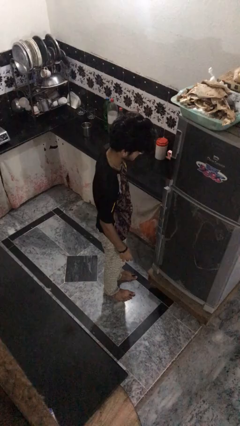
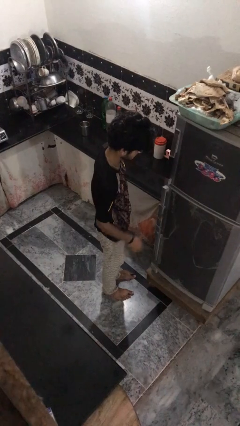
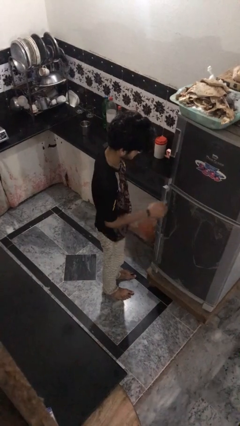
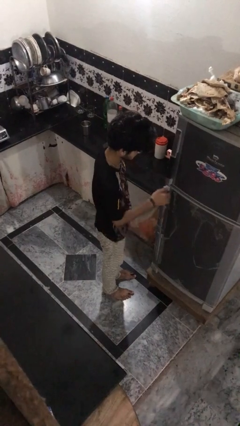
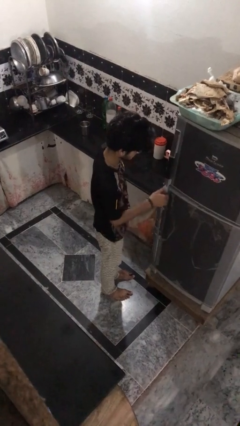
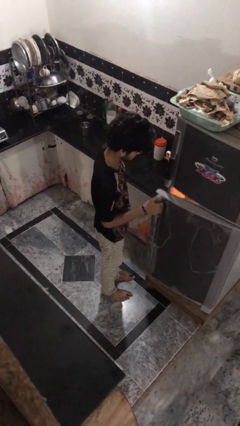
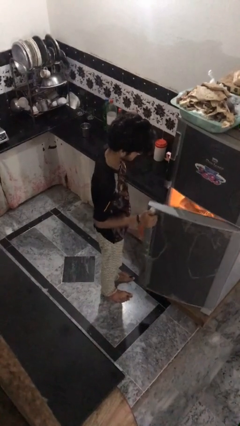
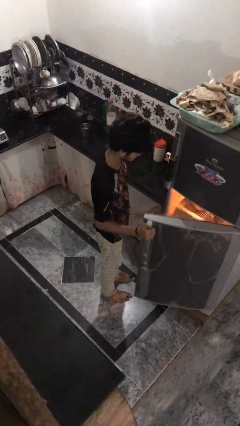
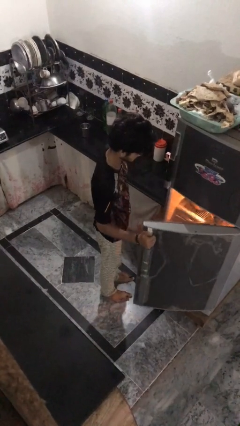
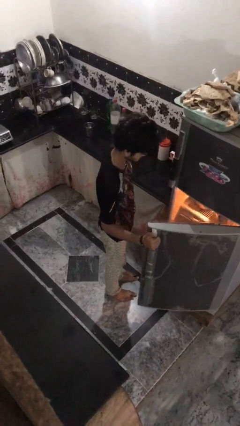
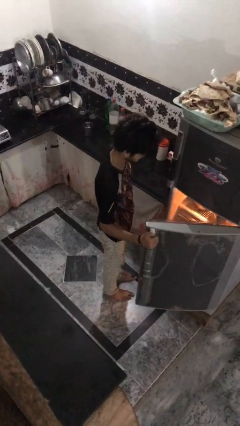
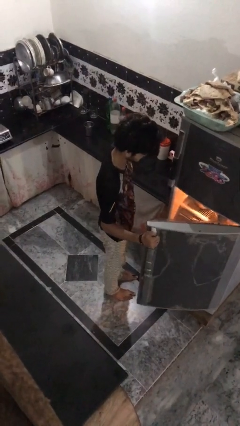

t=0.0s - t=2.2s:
person opens refrigerator

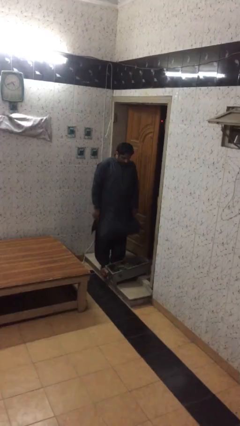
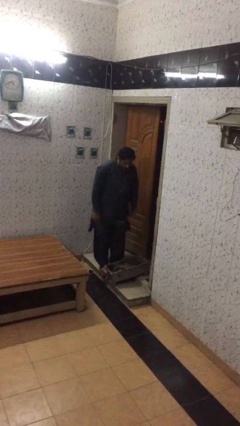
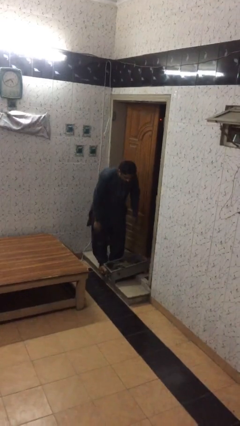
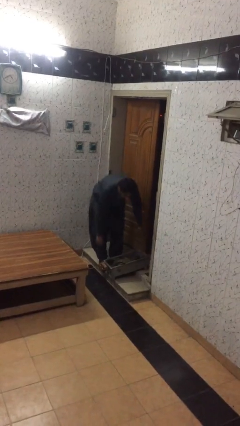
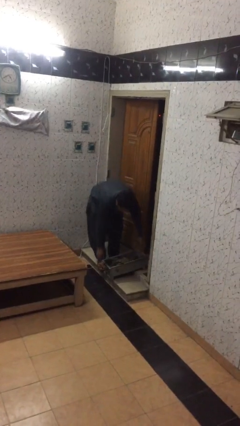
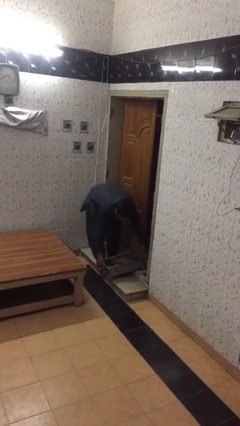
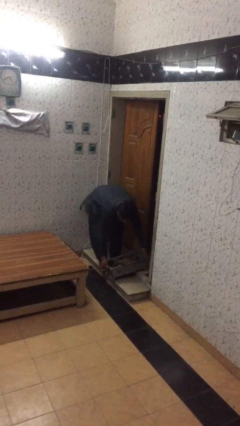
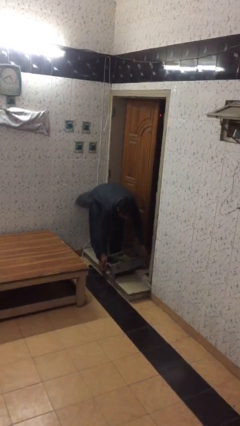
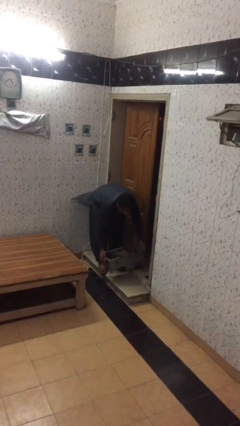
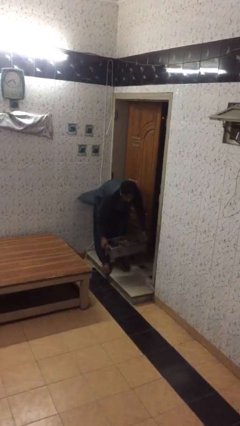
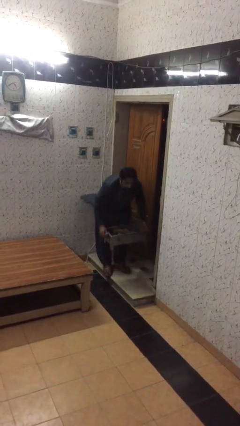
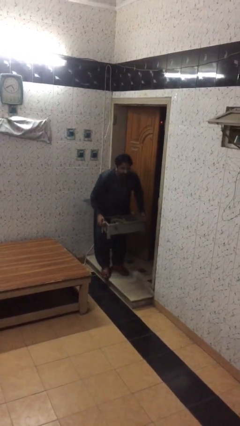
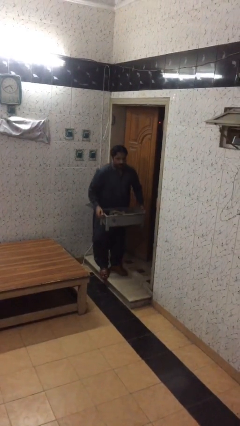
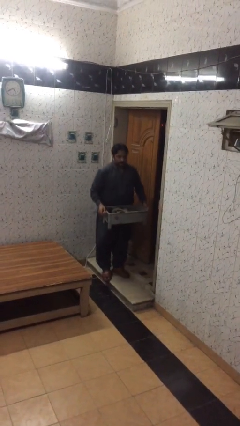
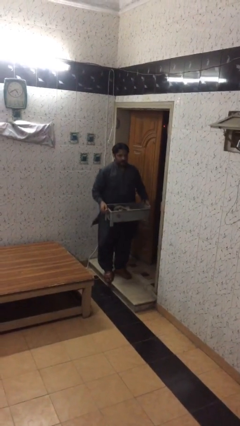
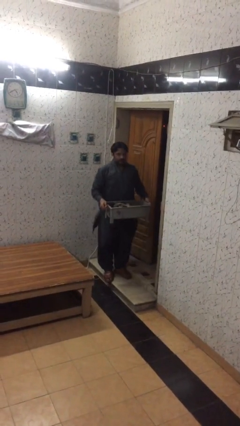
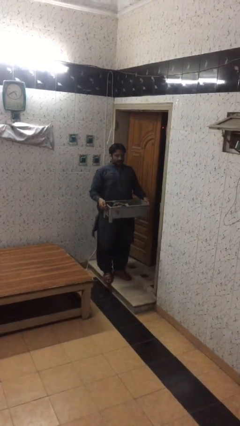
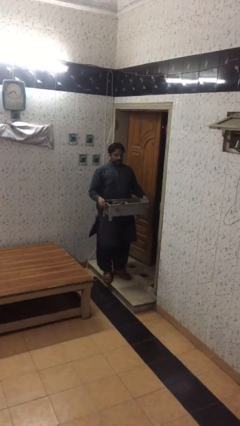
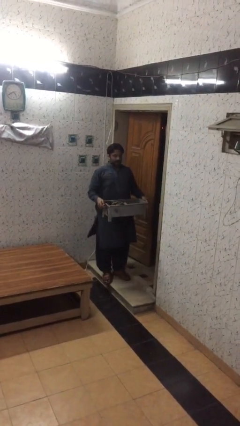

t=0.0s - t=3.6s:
person picks up object from floor

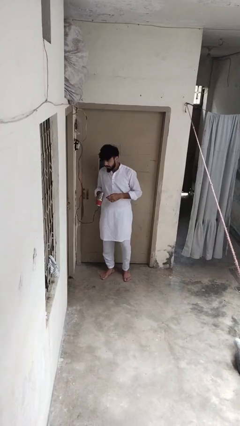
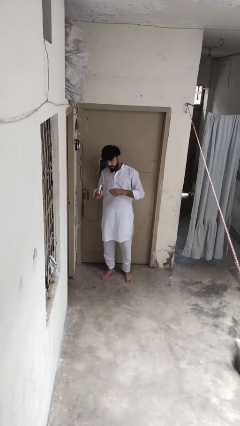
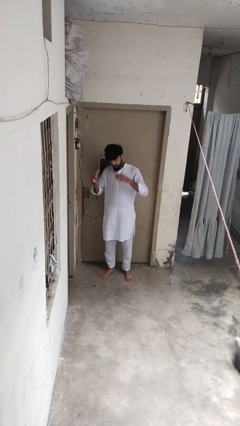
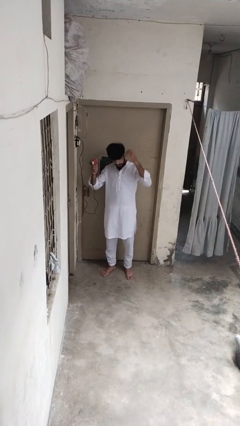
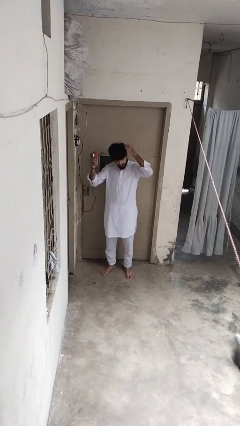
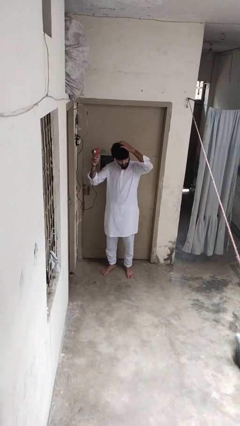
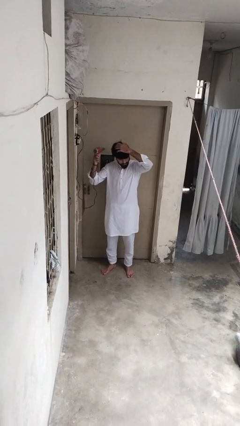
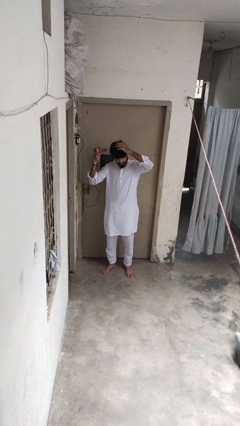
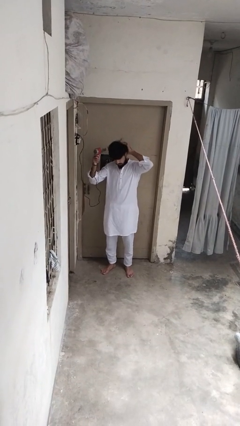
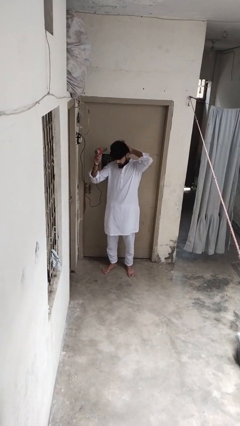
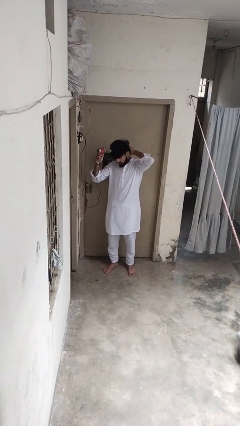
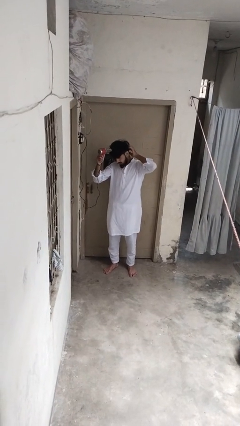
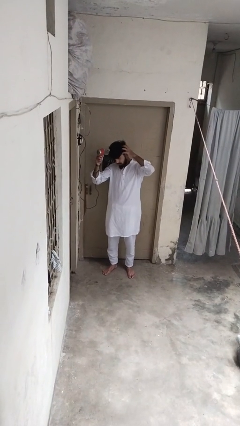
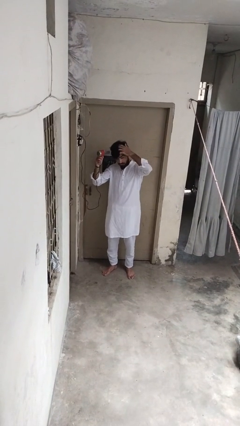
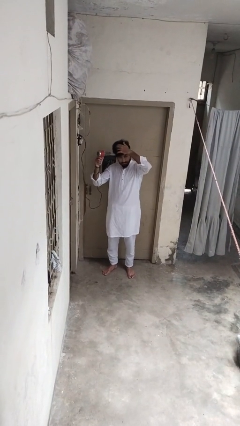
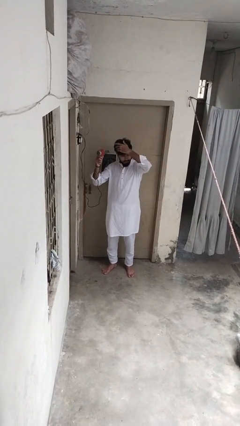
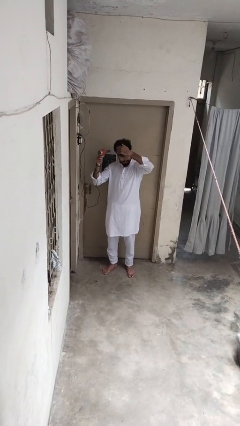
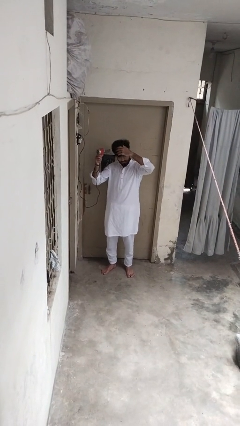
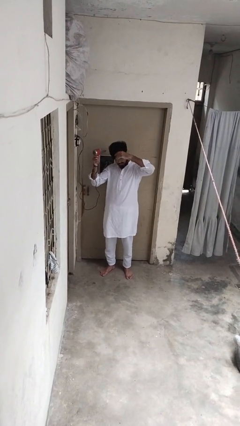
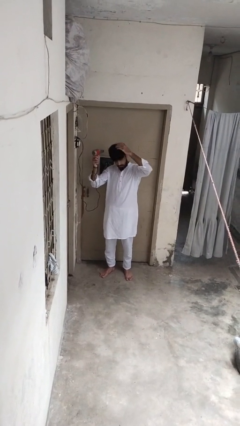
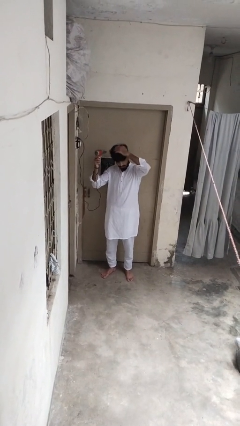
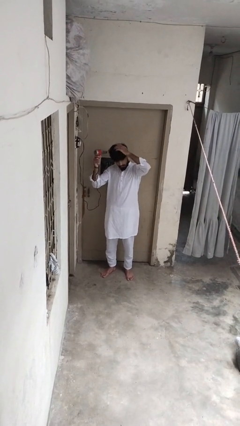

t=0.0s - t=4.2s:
person dries hair with hairdryer

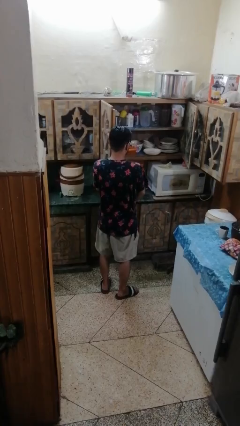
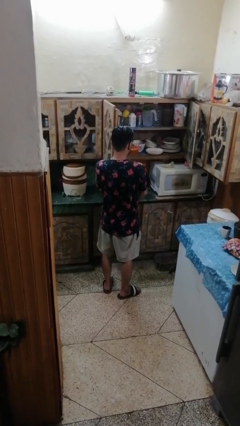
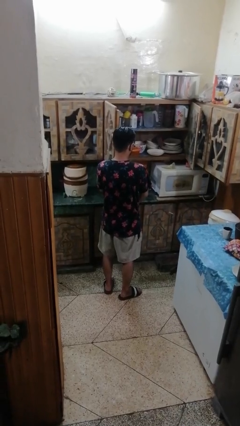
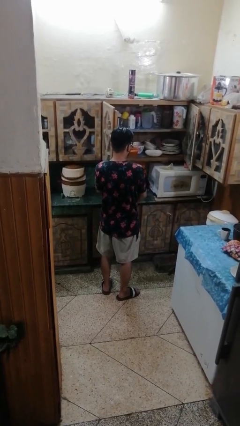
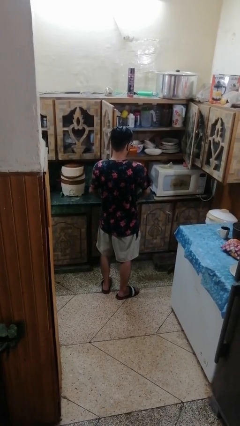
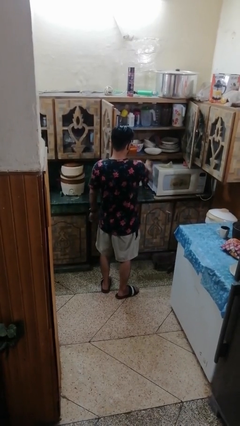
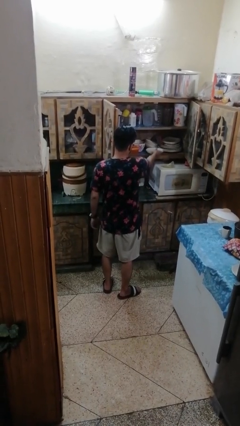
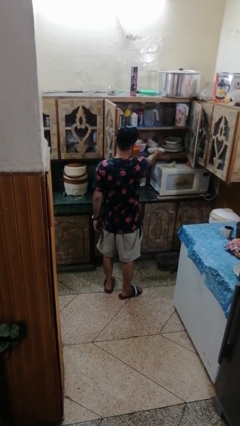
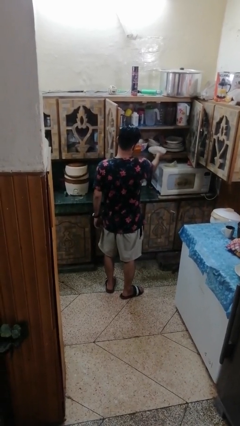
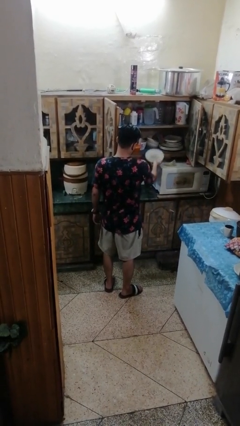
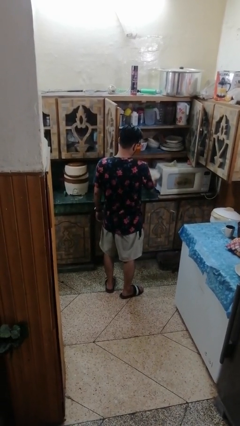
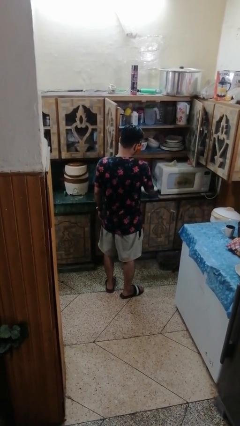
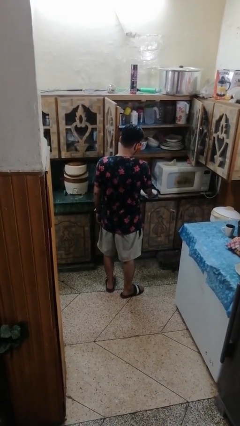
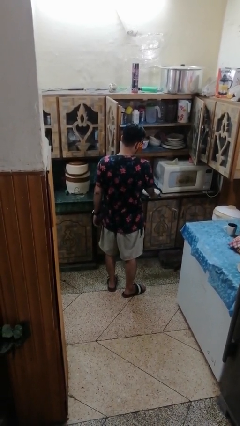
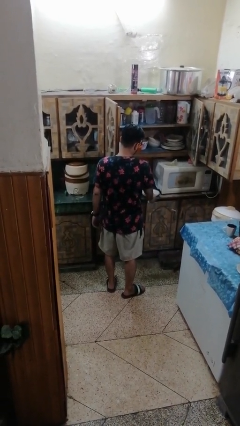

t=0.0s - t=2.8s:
person takes object from cabinet

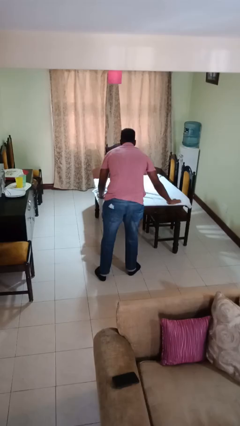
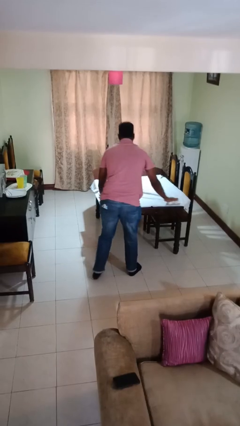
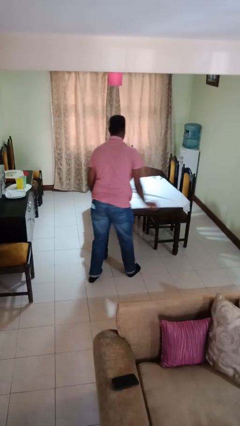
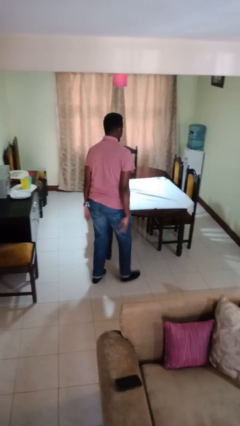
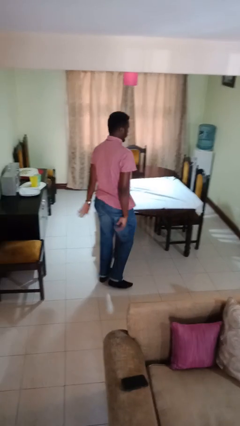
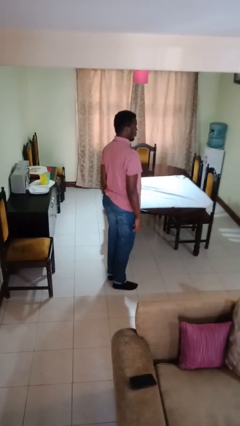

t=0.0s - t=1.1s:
person folds tablecloth

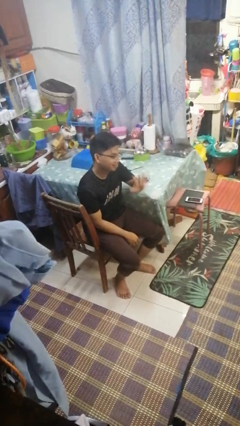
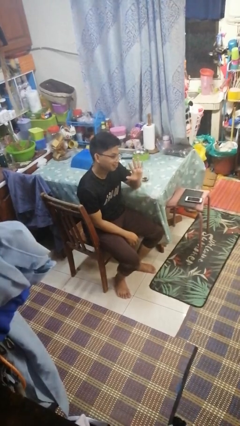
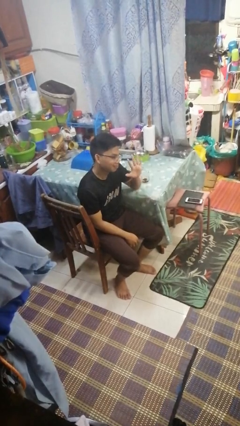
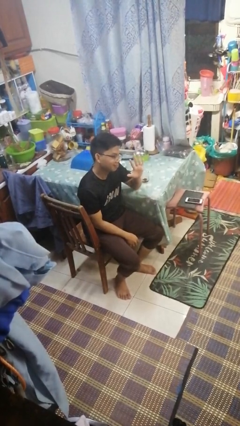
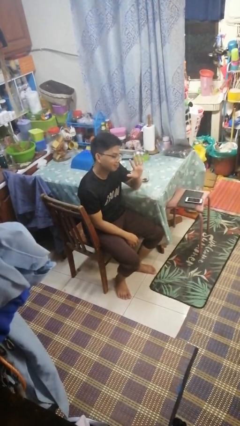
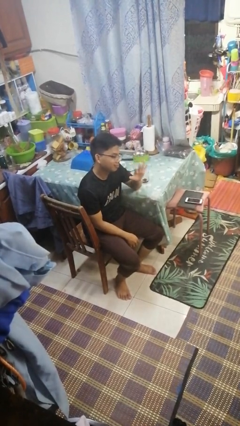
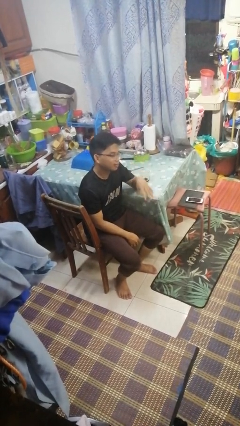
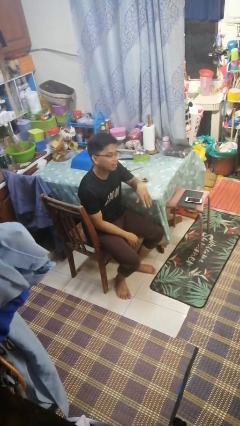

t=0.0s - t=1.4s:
person gestures number five

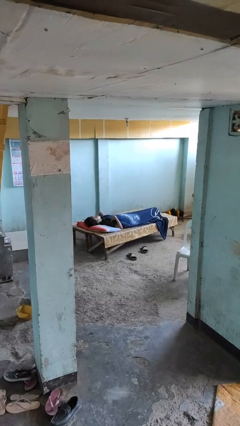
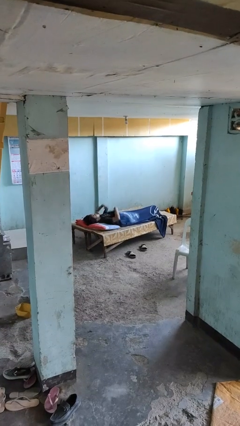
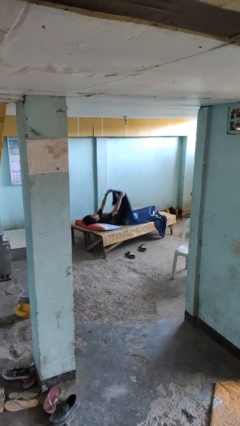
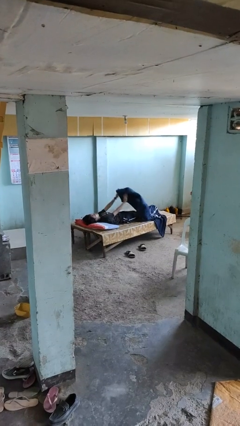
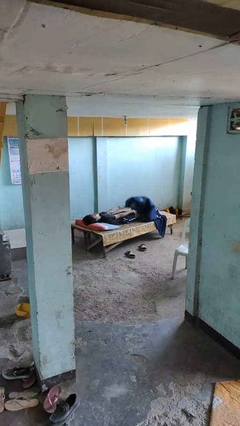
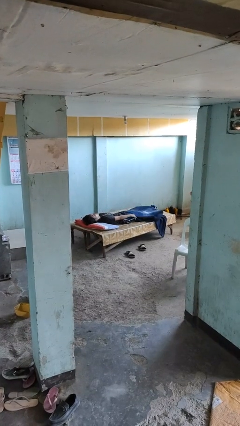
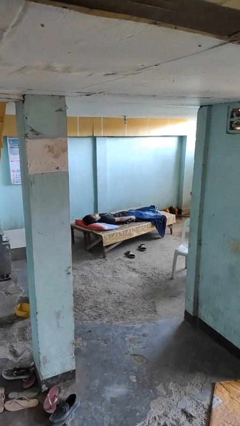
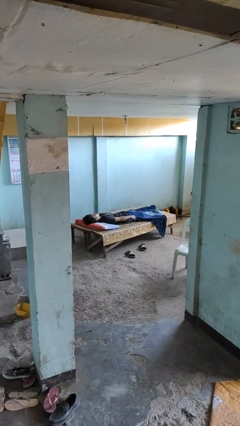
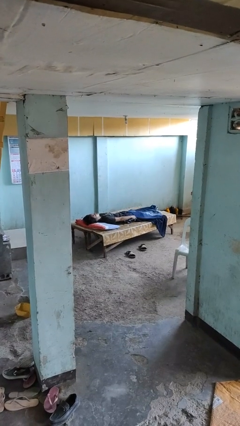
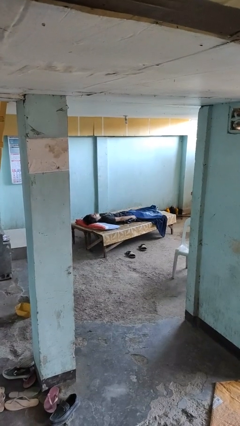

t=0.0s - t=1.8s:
person uncovers with blanket
